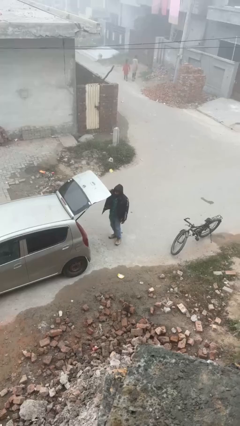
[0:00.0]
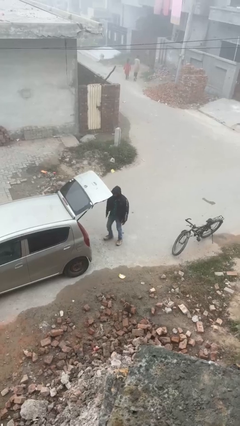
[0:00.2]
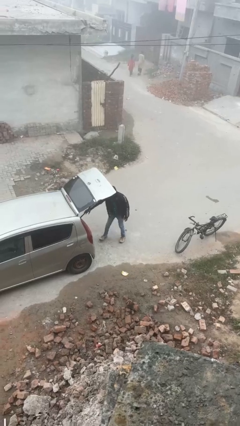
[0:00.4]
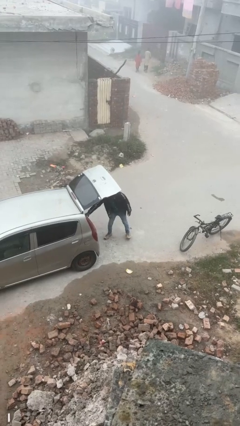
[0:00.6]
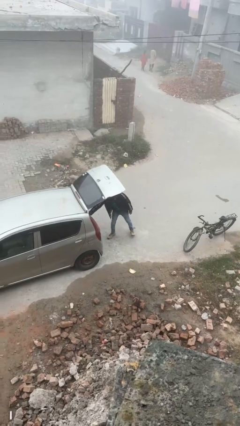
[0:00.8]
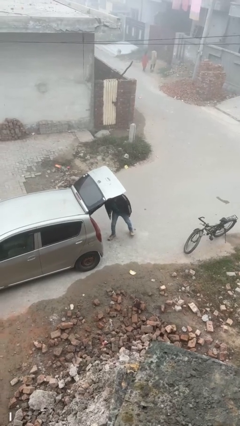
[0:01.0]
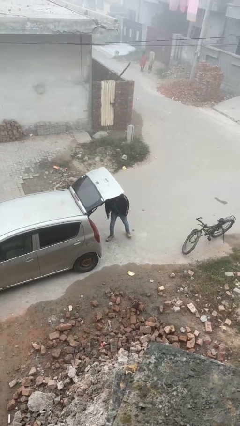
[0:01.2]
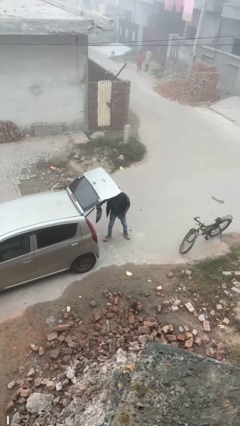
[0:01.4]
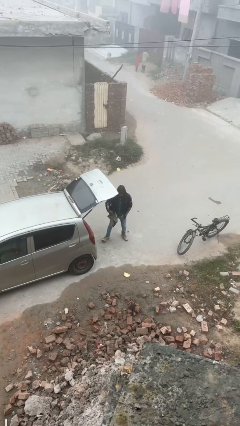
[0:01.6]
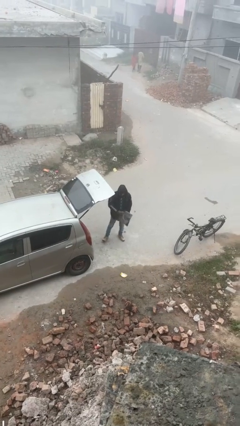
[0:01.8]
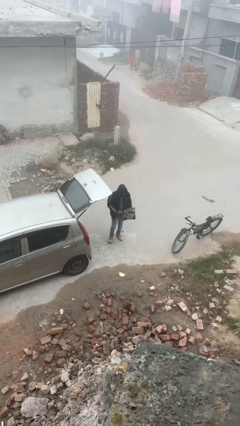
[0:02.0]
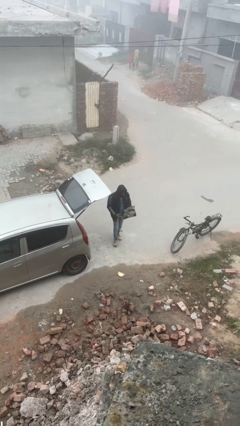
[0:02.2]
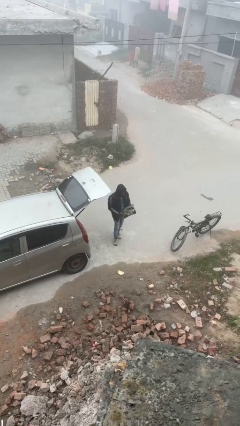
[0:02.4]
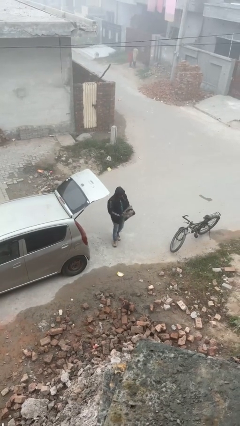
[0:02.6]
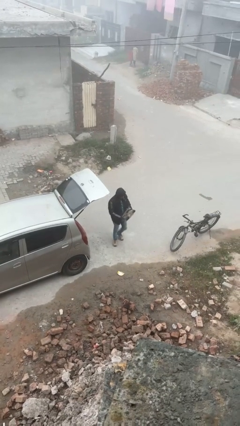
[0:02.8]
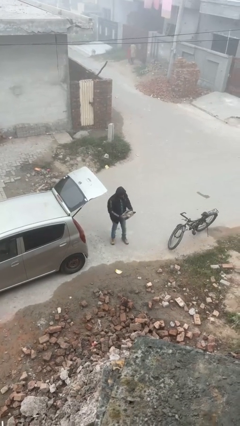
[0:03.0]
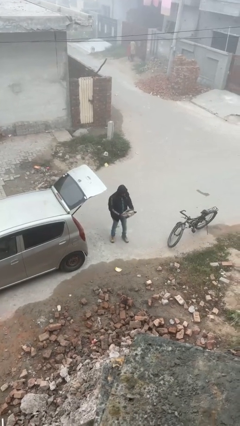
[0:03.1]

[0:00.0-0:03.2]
person unloads car

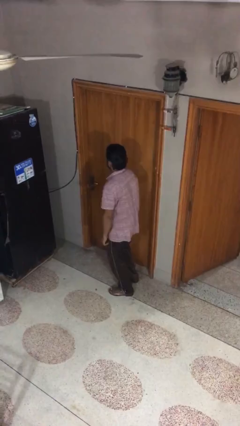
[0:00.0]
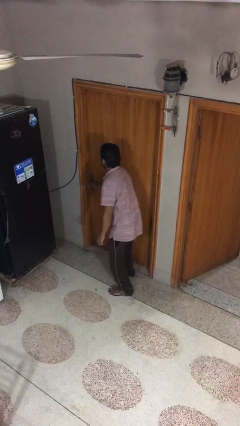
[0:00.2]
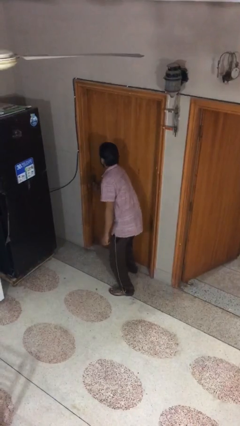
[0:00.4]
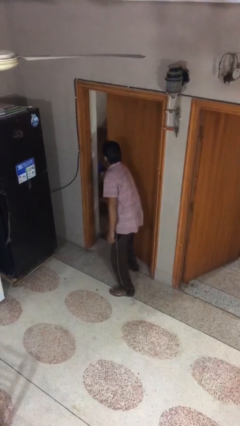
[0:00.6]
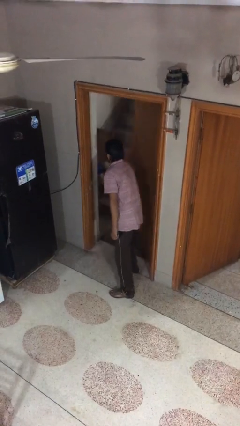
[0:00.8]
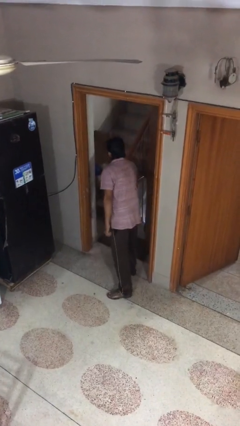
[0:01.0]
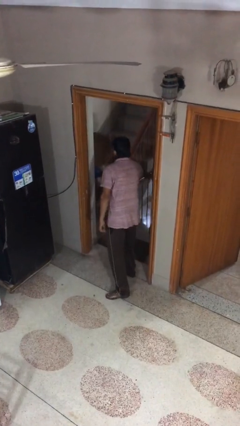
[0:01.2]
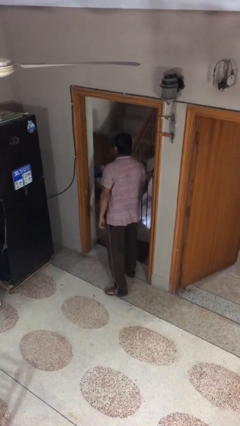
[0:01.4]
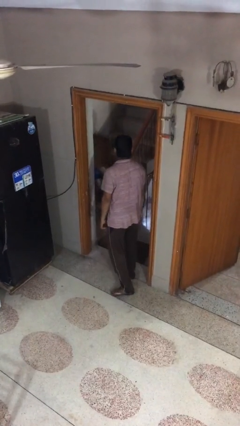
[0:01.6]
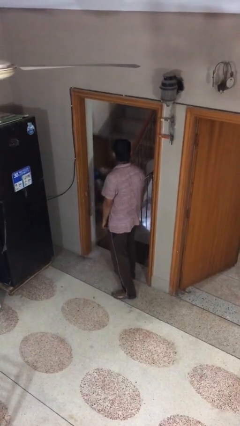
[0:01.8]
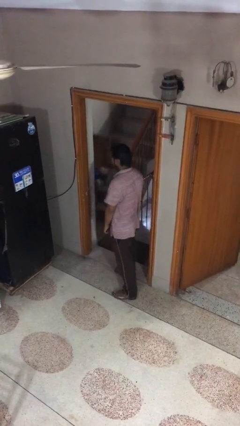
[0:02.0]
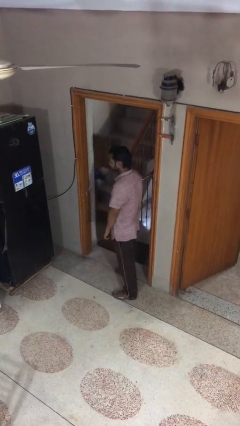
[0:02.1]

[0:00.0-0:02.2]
person opens facility door

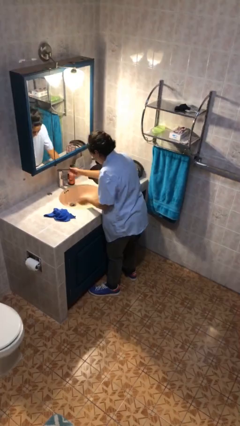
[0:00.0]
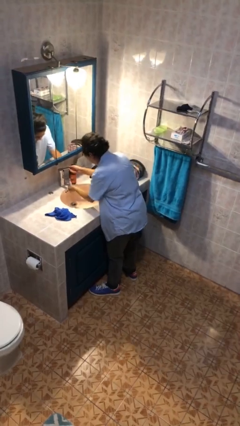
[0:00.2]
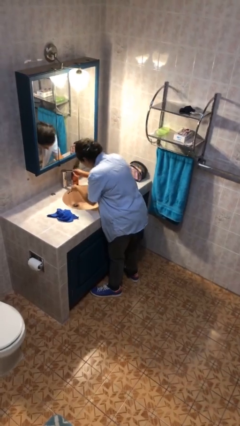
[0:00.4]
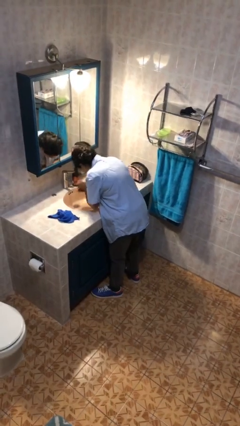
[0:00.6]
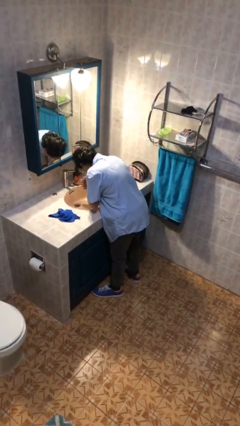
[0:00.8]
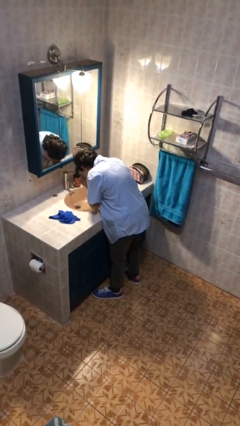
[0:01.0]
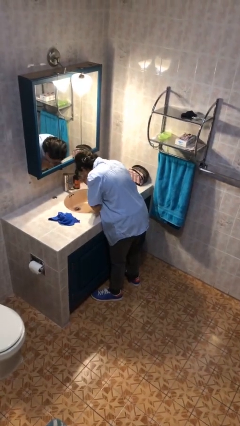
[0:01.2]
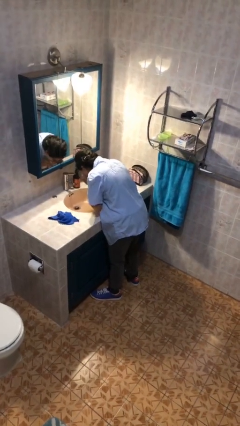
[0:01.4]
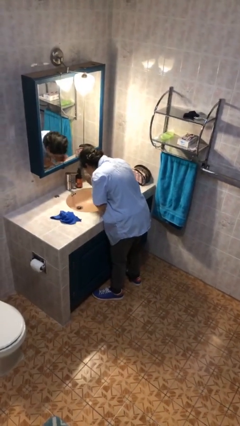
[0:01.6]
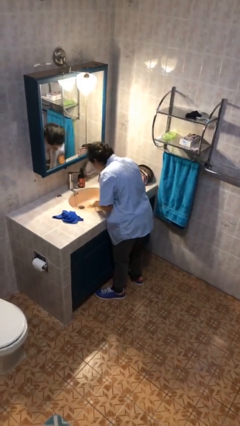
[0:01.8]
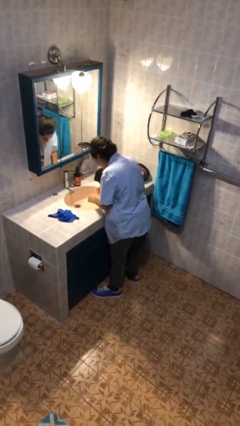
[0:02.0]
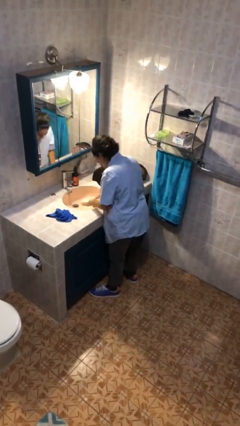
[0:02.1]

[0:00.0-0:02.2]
person washes face

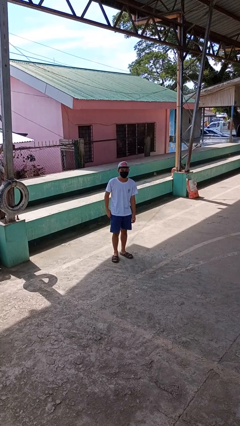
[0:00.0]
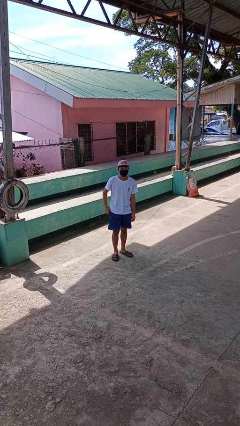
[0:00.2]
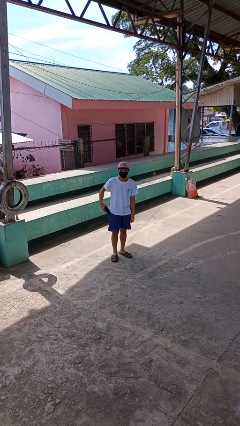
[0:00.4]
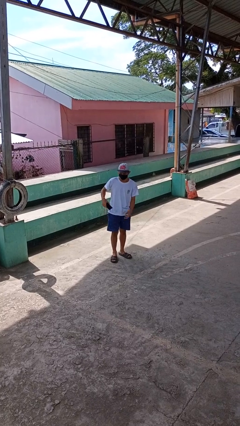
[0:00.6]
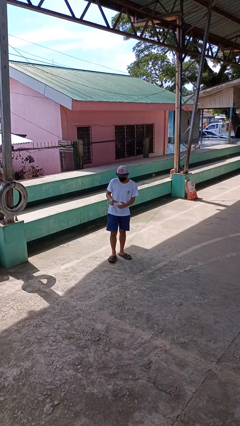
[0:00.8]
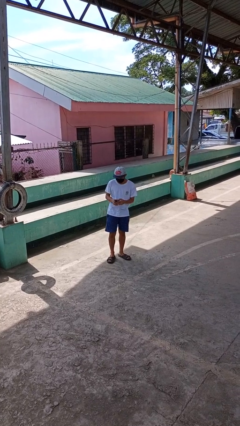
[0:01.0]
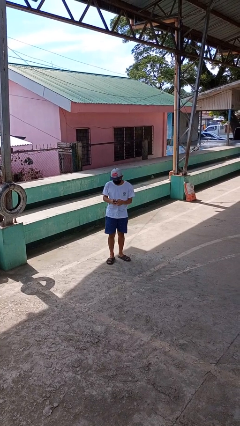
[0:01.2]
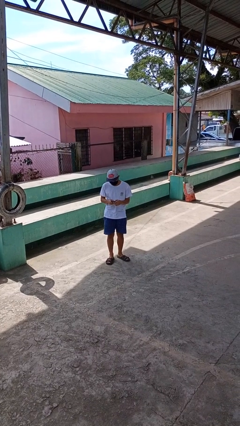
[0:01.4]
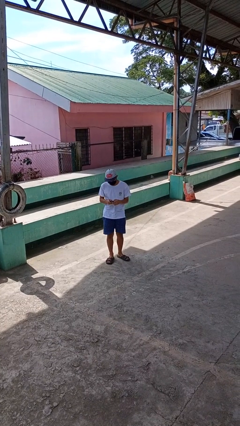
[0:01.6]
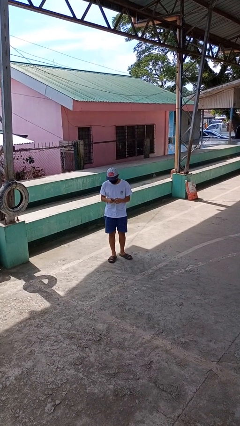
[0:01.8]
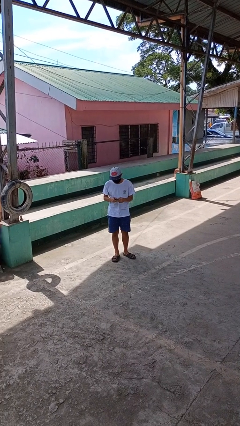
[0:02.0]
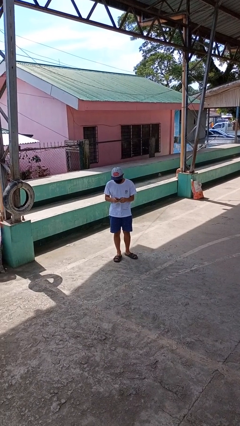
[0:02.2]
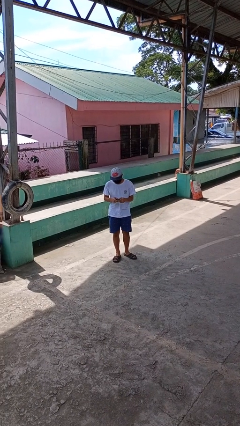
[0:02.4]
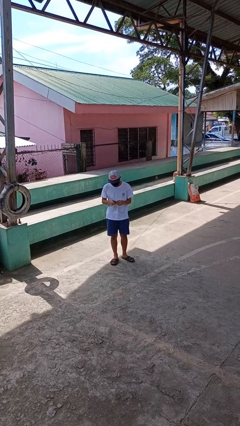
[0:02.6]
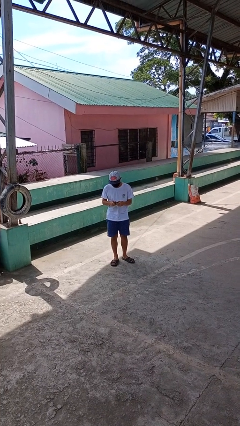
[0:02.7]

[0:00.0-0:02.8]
person takes phone from pocket

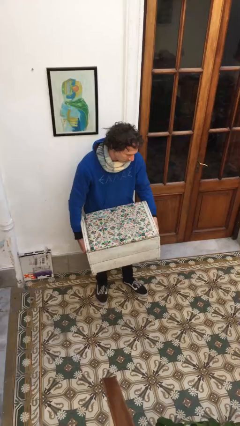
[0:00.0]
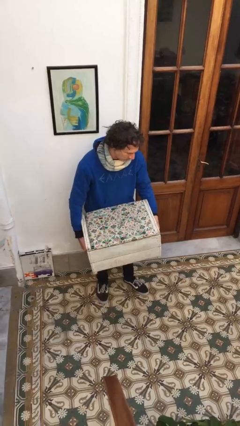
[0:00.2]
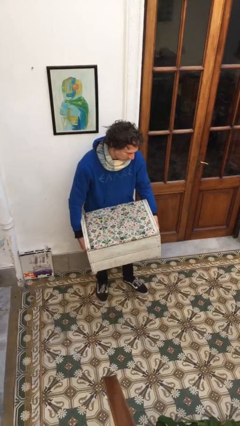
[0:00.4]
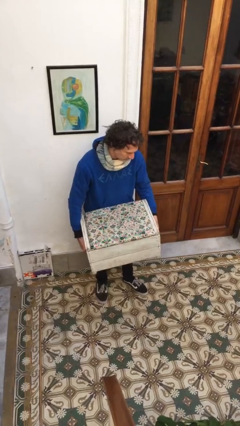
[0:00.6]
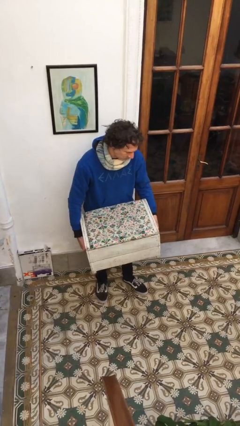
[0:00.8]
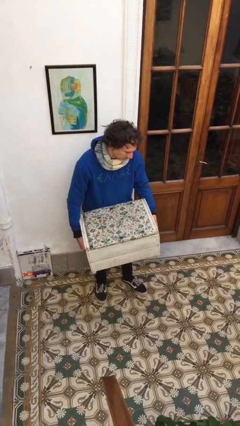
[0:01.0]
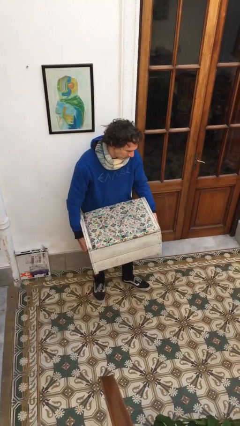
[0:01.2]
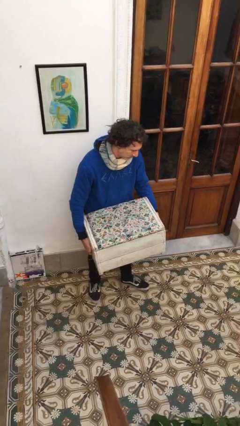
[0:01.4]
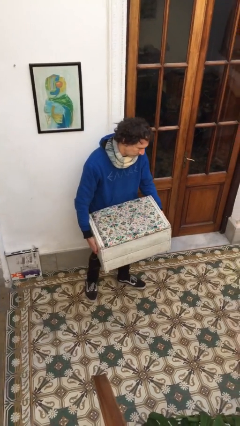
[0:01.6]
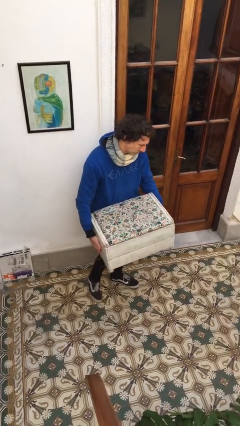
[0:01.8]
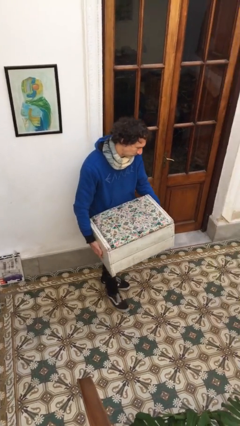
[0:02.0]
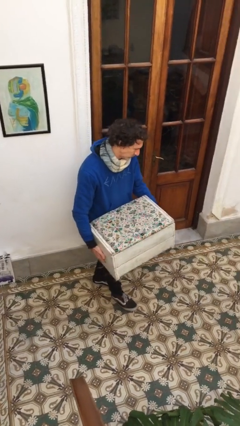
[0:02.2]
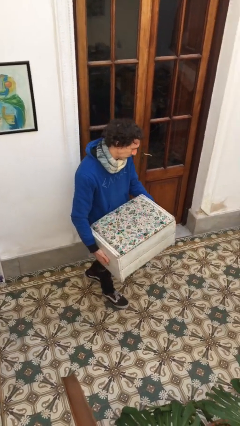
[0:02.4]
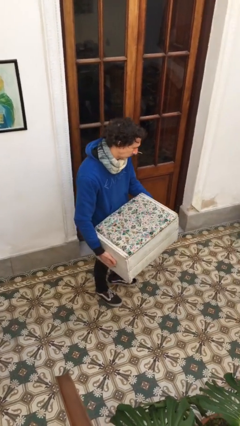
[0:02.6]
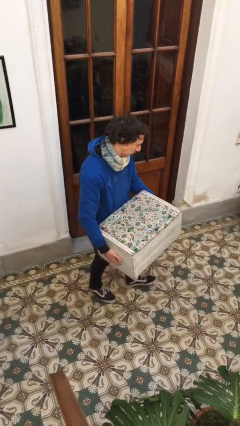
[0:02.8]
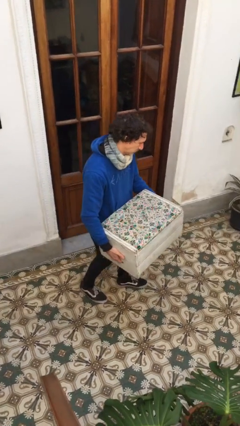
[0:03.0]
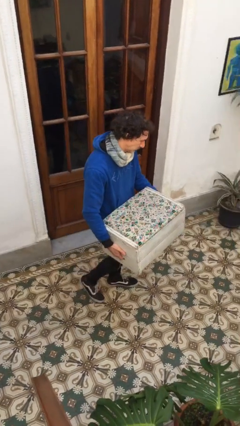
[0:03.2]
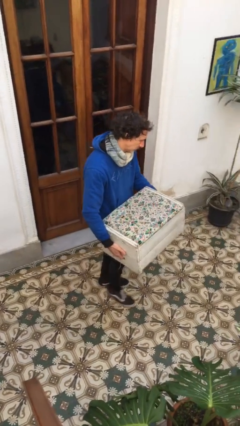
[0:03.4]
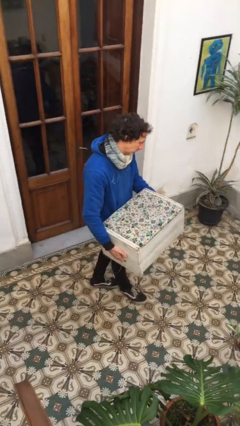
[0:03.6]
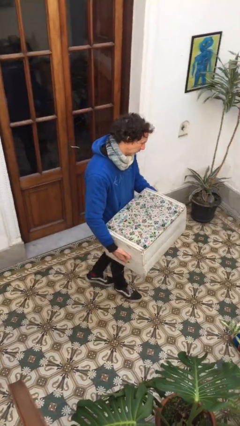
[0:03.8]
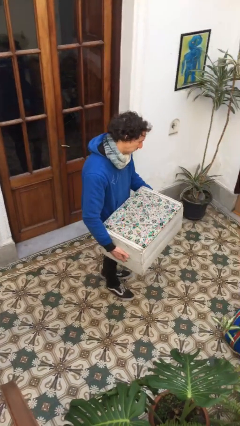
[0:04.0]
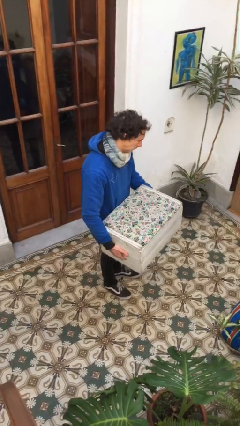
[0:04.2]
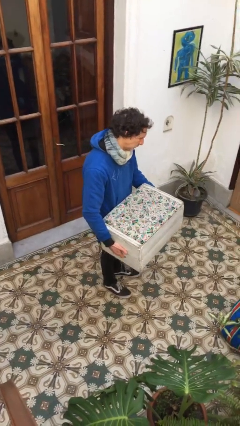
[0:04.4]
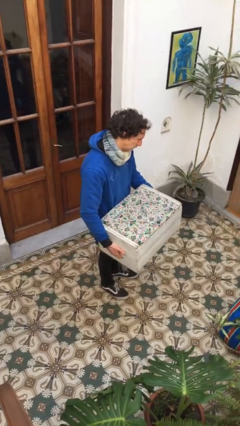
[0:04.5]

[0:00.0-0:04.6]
person carries furniture

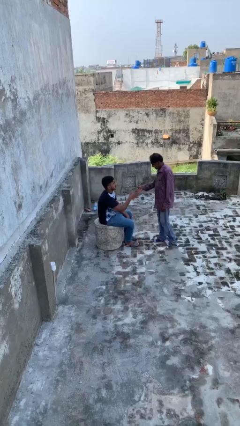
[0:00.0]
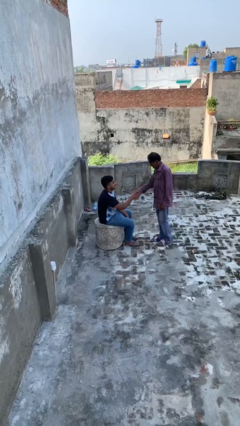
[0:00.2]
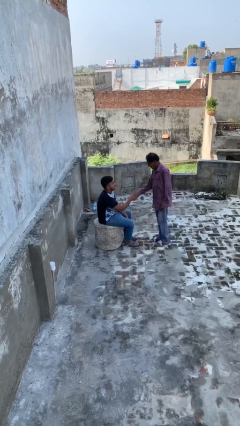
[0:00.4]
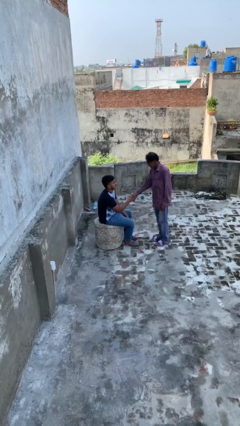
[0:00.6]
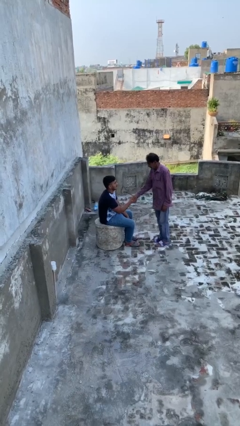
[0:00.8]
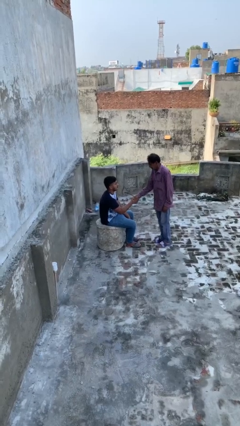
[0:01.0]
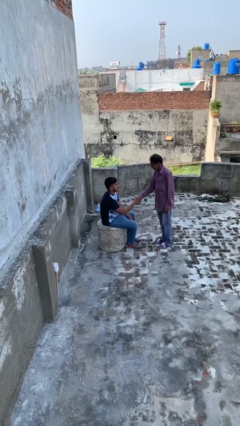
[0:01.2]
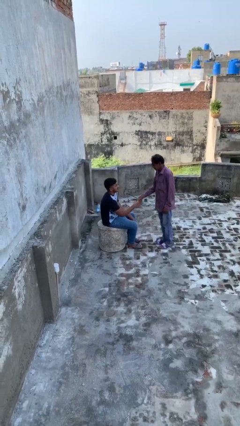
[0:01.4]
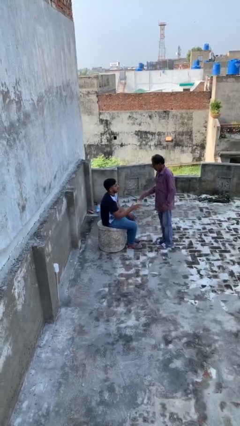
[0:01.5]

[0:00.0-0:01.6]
person shakes hand

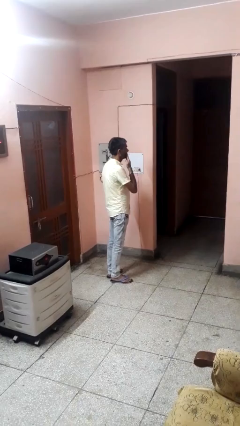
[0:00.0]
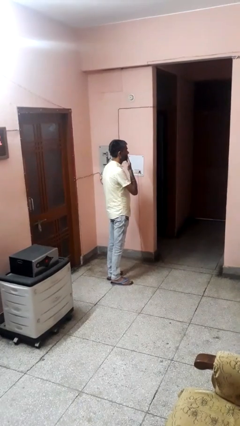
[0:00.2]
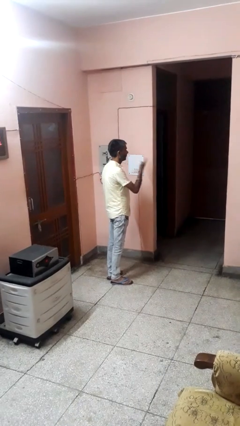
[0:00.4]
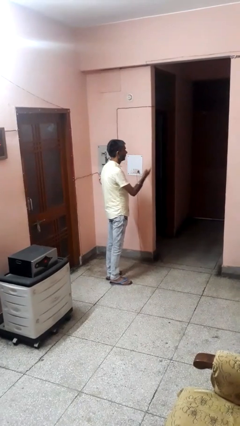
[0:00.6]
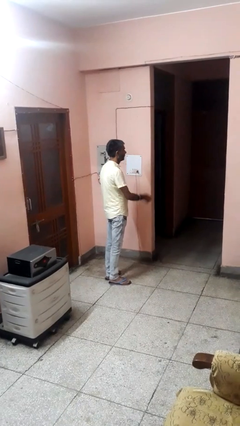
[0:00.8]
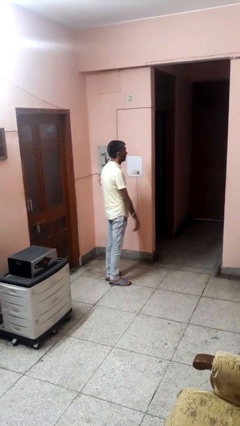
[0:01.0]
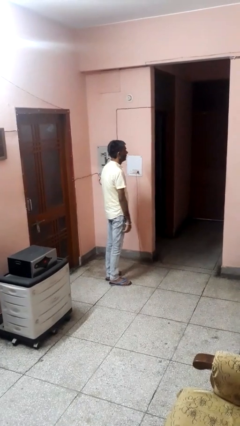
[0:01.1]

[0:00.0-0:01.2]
person gestures blow kiss
